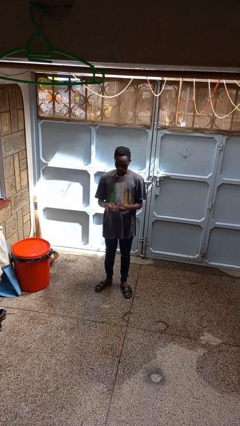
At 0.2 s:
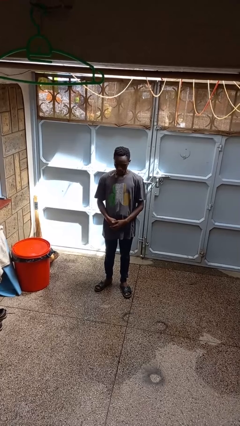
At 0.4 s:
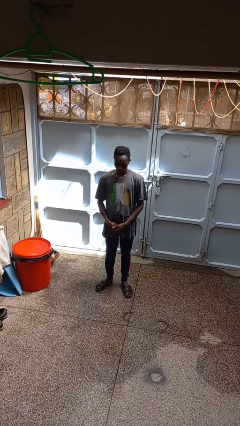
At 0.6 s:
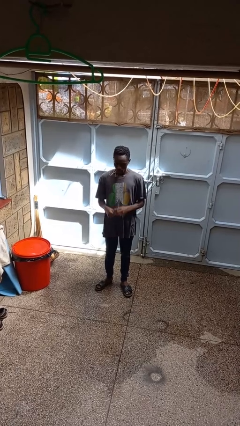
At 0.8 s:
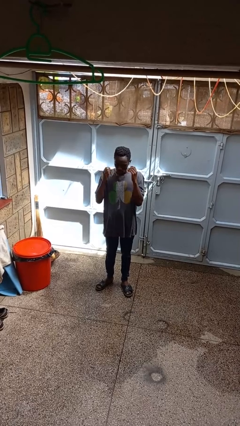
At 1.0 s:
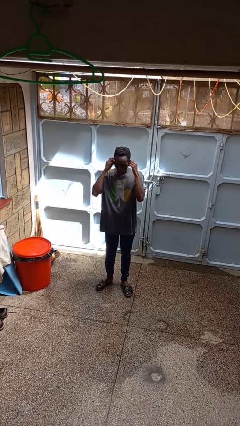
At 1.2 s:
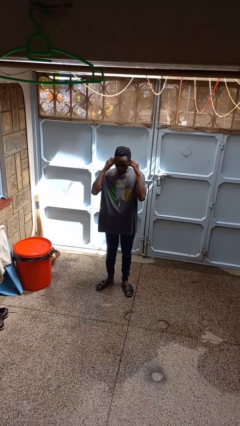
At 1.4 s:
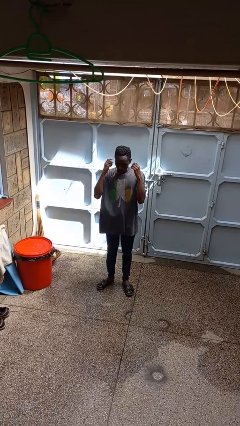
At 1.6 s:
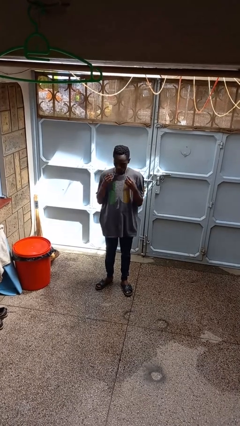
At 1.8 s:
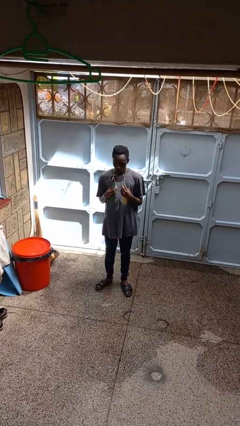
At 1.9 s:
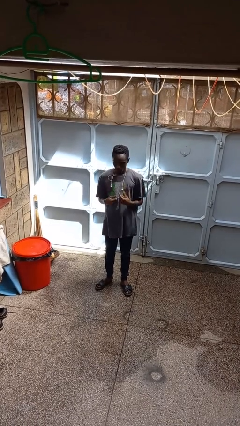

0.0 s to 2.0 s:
person takes off headphones

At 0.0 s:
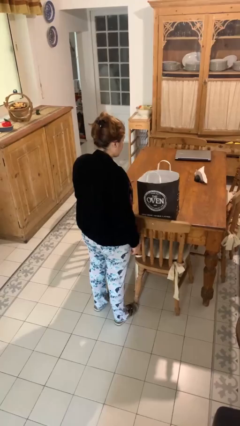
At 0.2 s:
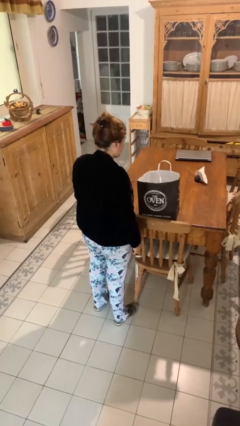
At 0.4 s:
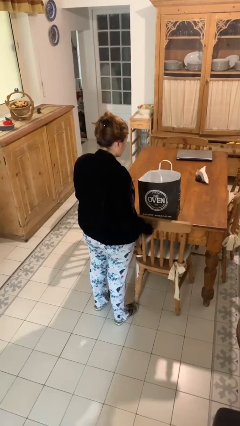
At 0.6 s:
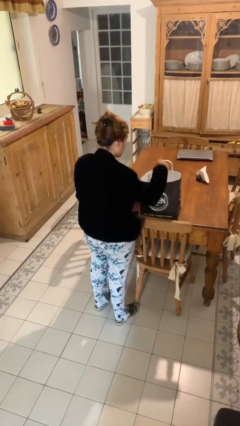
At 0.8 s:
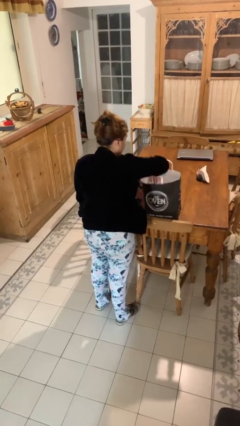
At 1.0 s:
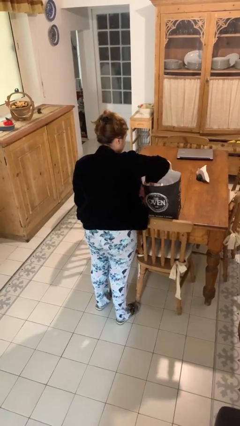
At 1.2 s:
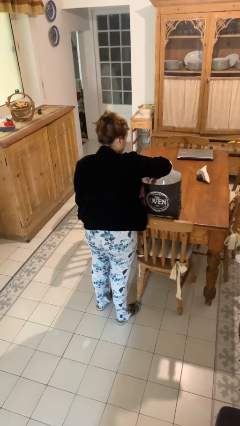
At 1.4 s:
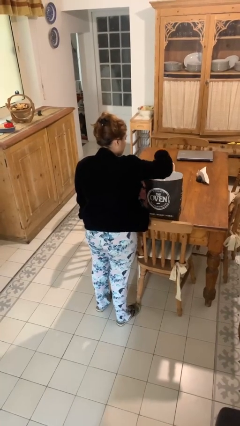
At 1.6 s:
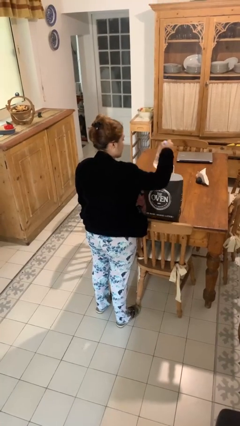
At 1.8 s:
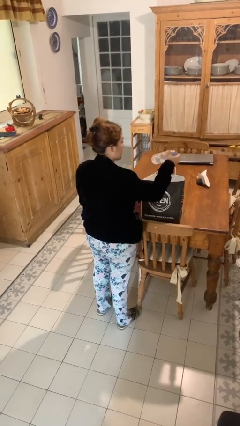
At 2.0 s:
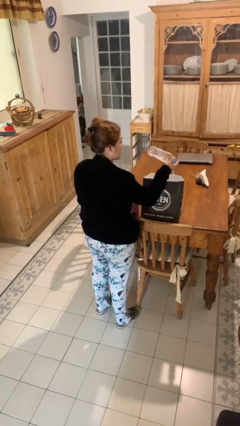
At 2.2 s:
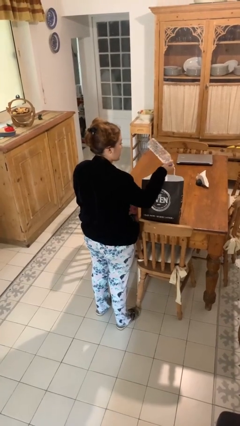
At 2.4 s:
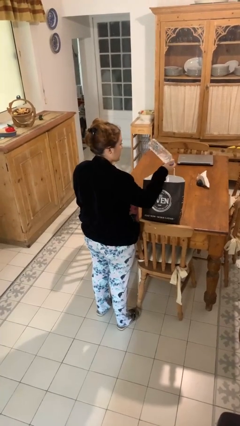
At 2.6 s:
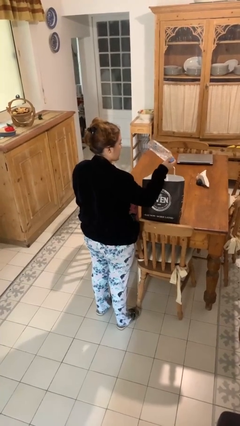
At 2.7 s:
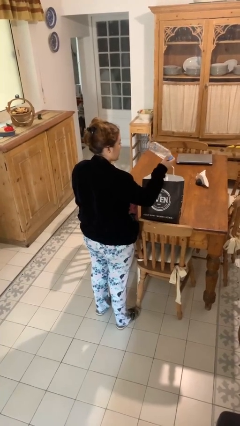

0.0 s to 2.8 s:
person takes object from bag

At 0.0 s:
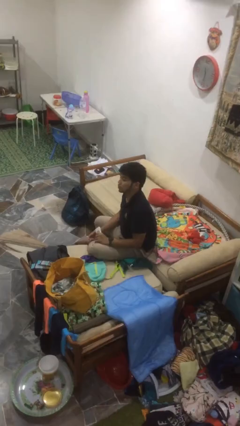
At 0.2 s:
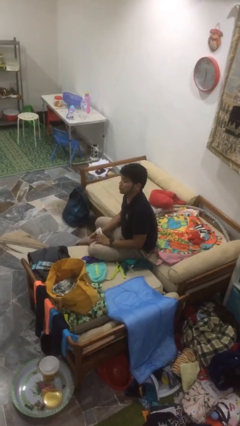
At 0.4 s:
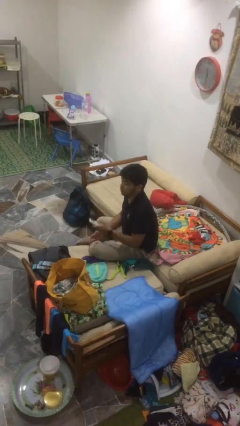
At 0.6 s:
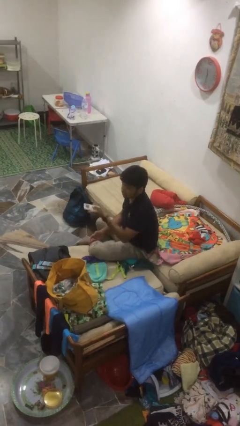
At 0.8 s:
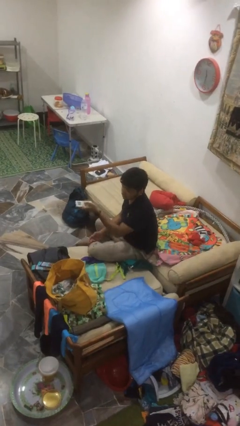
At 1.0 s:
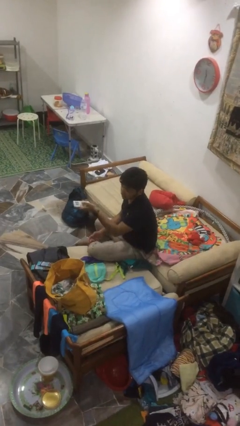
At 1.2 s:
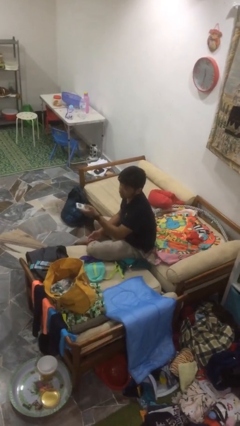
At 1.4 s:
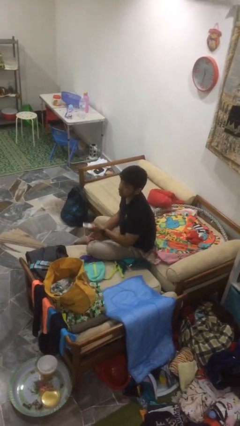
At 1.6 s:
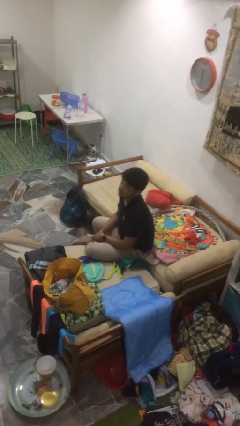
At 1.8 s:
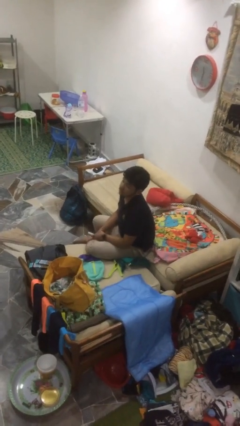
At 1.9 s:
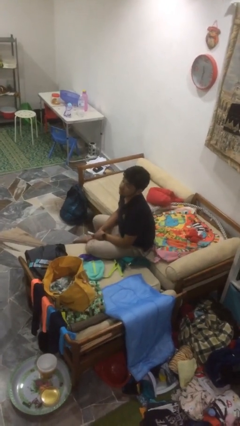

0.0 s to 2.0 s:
person uses television remote

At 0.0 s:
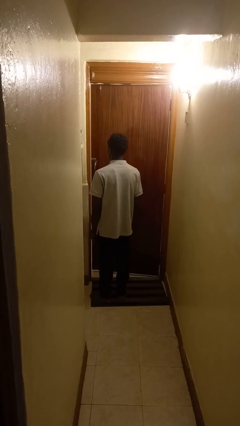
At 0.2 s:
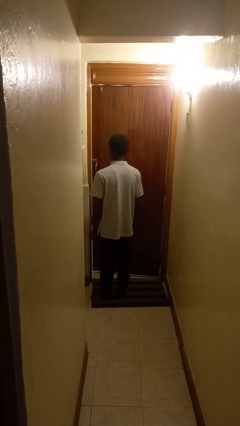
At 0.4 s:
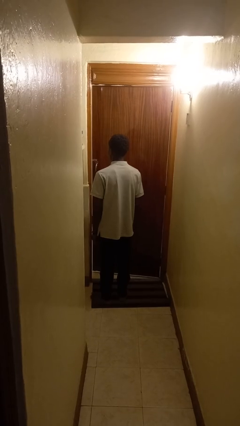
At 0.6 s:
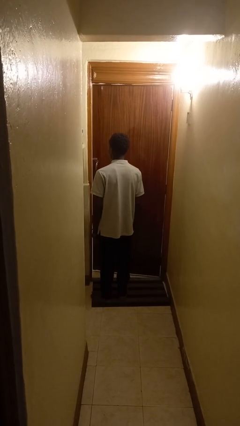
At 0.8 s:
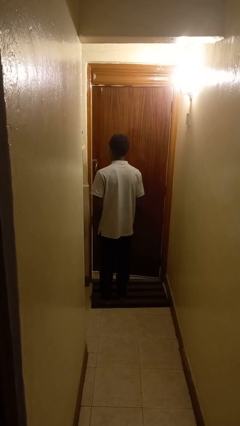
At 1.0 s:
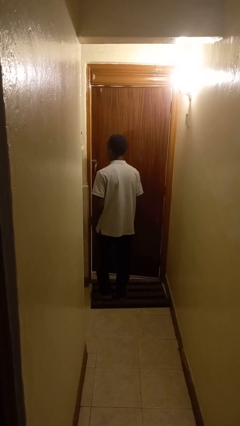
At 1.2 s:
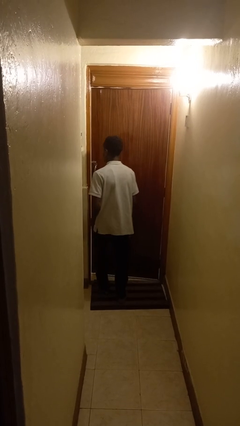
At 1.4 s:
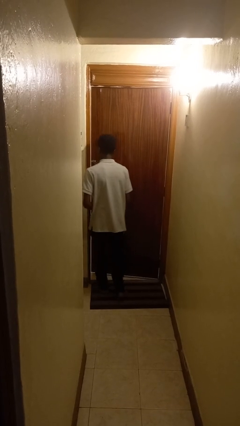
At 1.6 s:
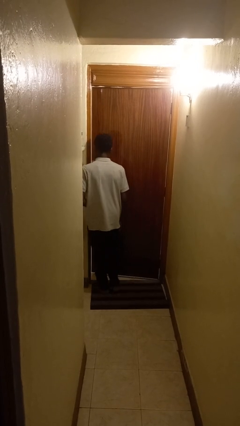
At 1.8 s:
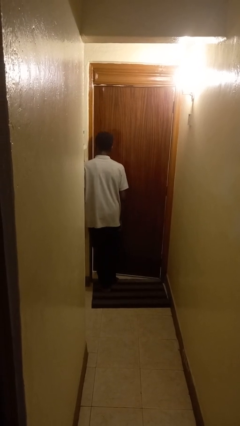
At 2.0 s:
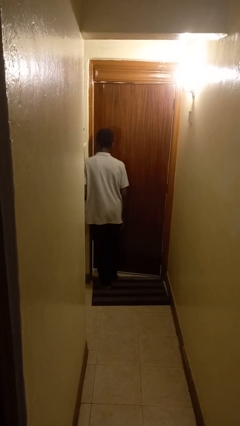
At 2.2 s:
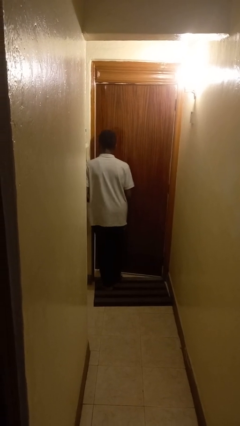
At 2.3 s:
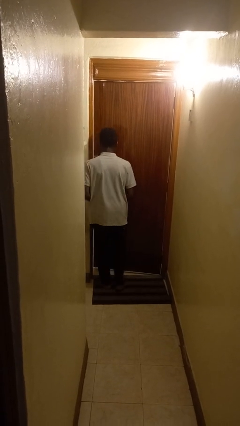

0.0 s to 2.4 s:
person bumps into wall

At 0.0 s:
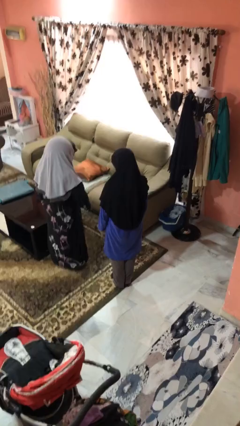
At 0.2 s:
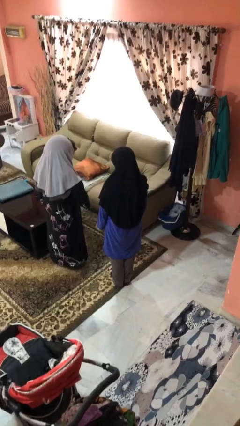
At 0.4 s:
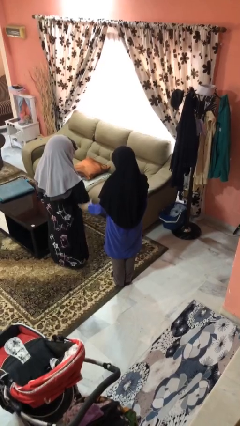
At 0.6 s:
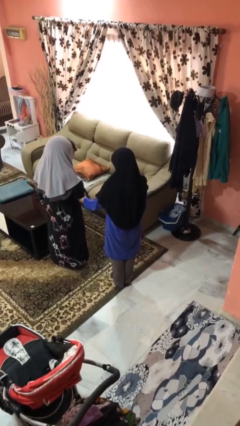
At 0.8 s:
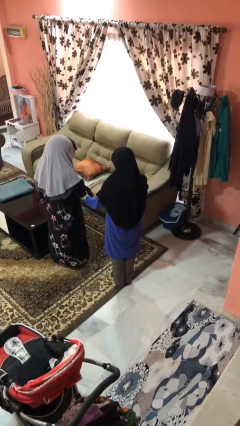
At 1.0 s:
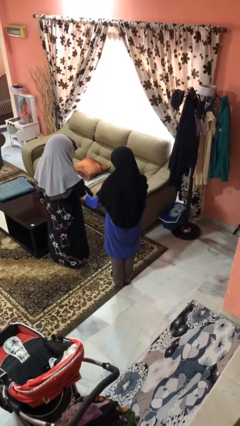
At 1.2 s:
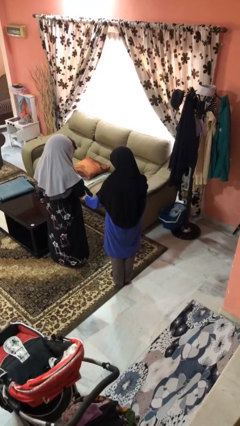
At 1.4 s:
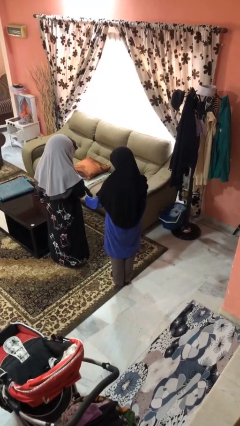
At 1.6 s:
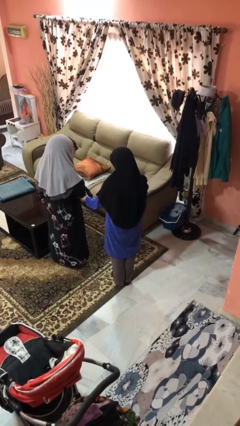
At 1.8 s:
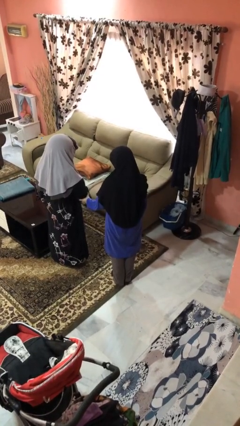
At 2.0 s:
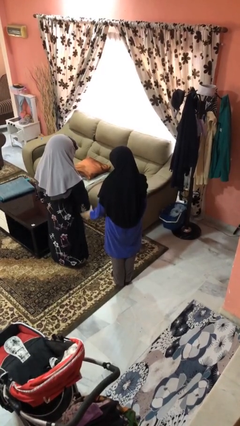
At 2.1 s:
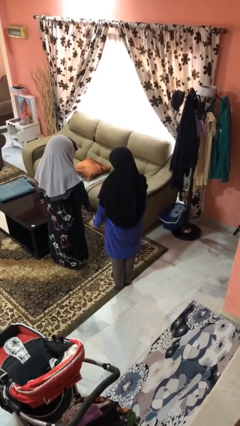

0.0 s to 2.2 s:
person grabs person by forearm

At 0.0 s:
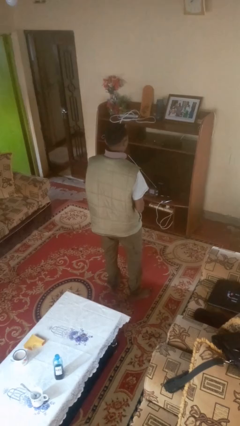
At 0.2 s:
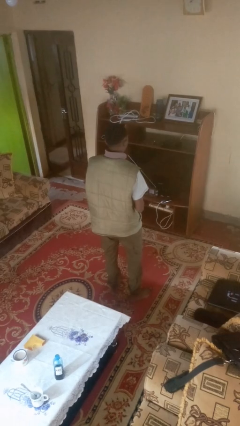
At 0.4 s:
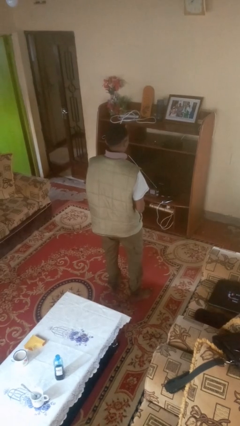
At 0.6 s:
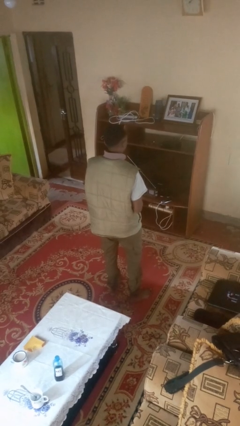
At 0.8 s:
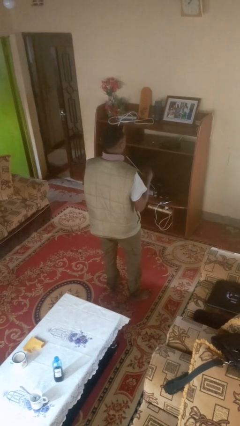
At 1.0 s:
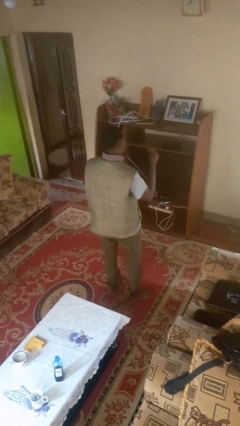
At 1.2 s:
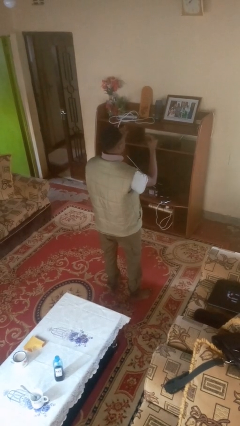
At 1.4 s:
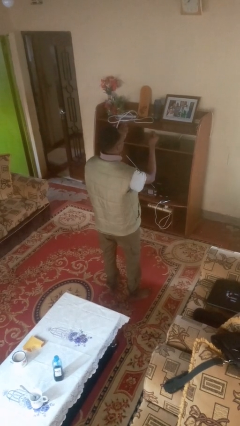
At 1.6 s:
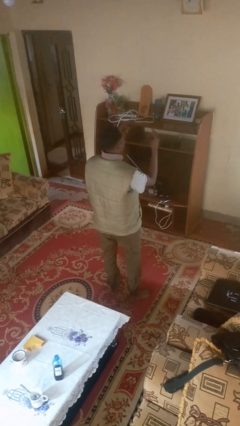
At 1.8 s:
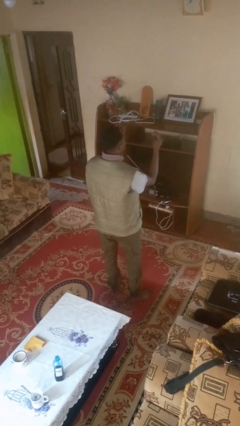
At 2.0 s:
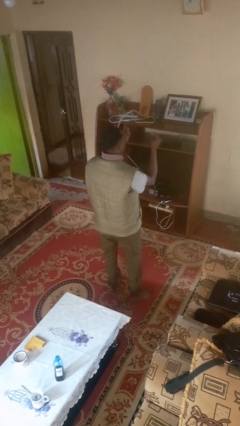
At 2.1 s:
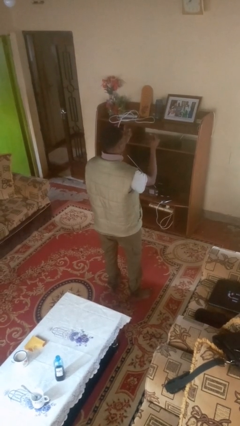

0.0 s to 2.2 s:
person snaps fingers

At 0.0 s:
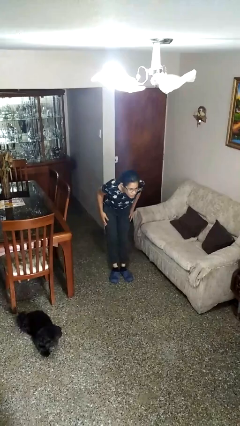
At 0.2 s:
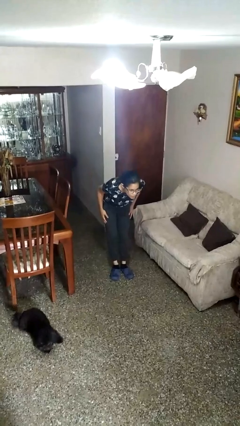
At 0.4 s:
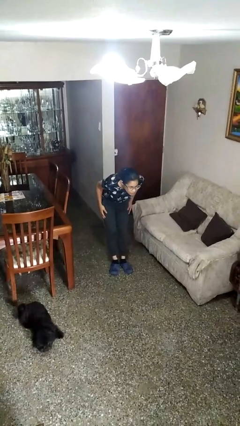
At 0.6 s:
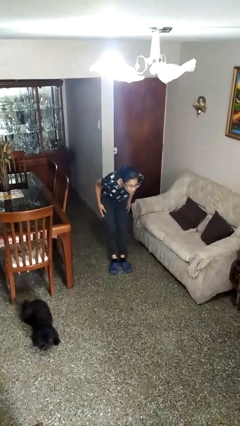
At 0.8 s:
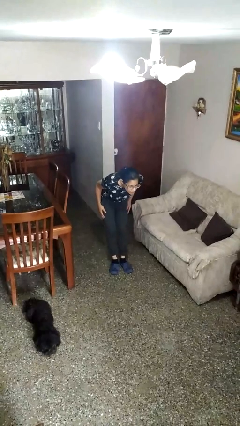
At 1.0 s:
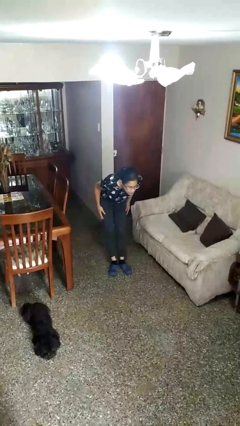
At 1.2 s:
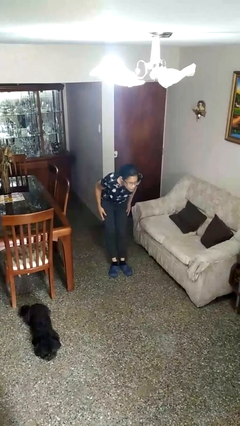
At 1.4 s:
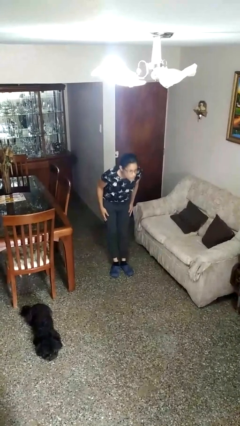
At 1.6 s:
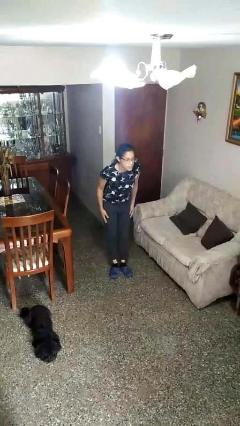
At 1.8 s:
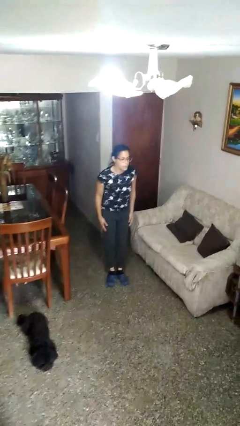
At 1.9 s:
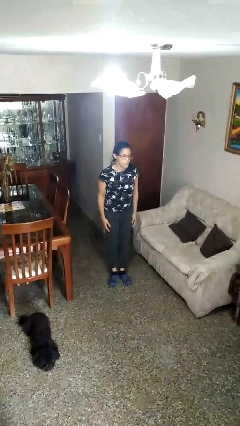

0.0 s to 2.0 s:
person bows

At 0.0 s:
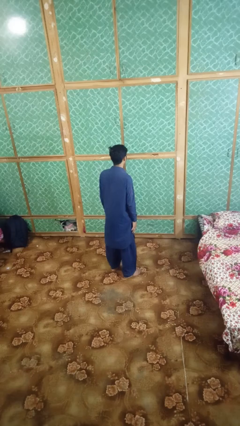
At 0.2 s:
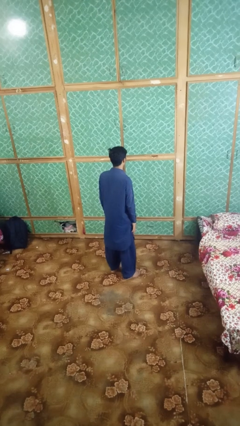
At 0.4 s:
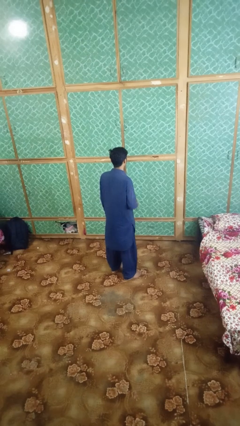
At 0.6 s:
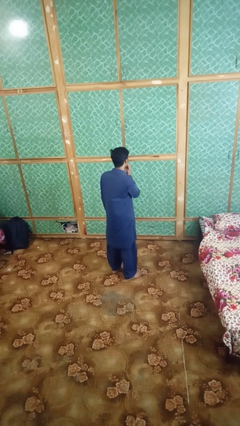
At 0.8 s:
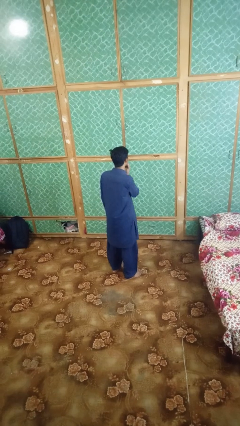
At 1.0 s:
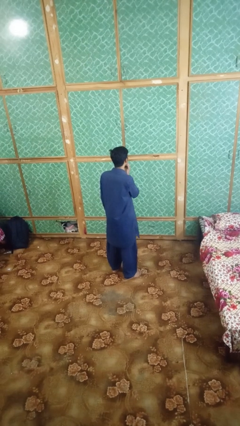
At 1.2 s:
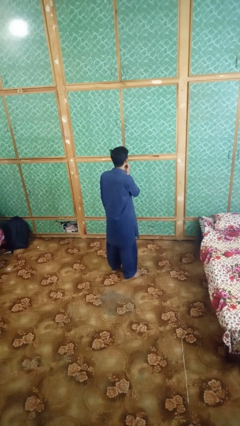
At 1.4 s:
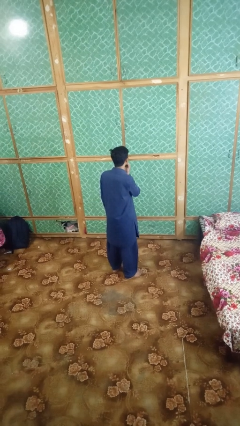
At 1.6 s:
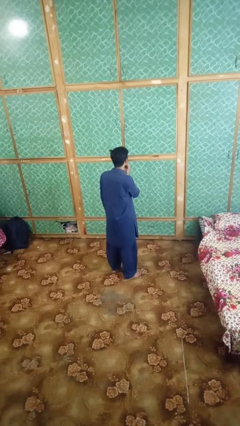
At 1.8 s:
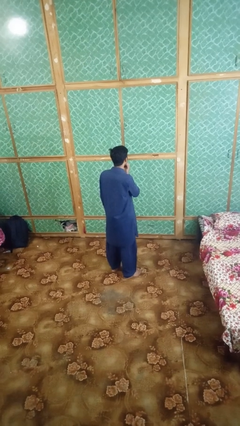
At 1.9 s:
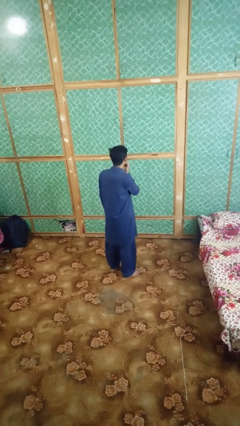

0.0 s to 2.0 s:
person strokes chin
